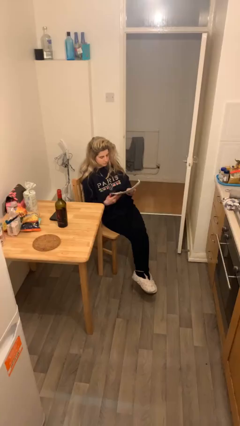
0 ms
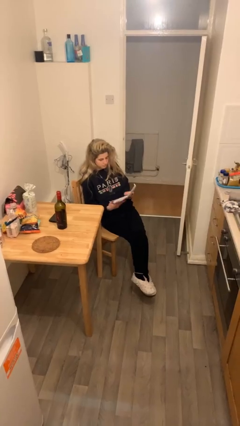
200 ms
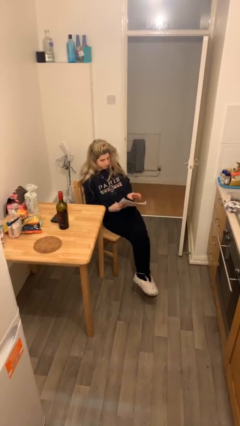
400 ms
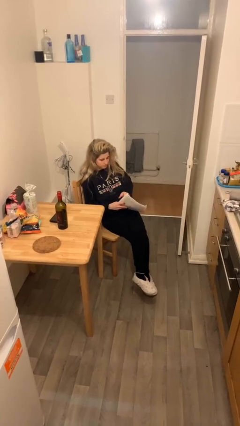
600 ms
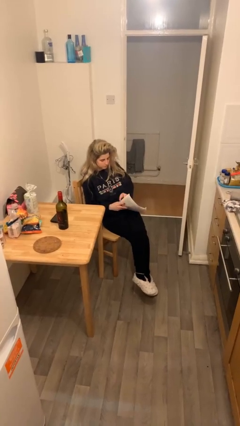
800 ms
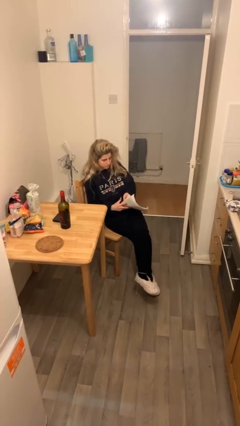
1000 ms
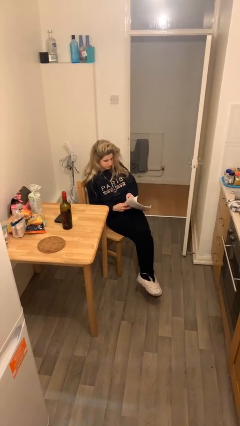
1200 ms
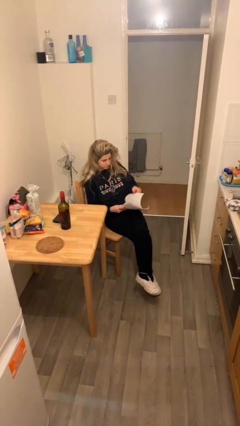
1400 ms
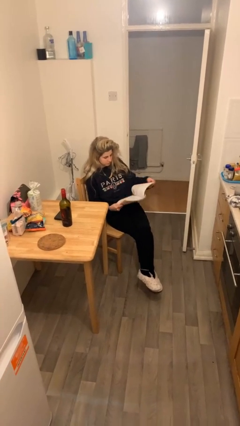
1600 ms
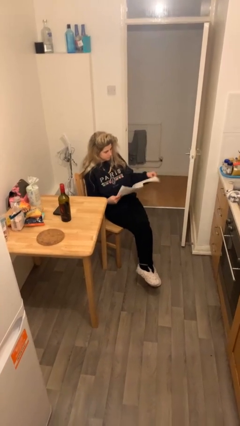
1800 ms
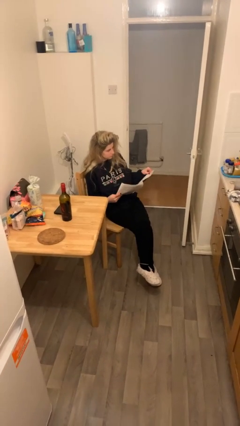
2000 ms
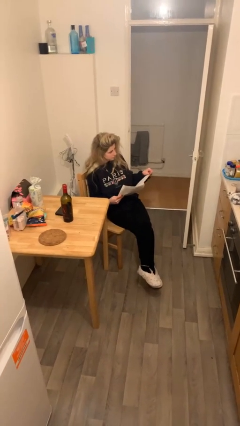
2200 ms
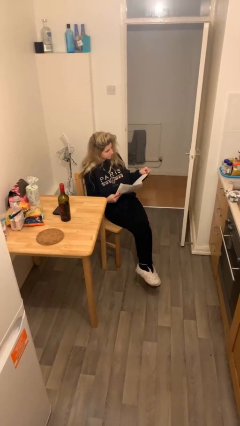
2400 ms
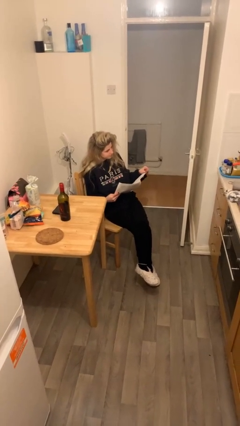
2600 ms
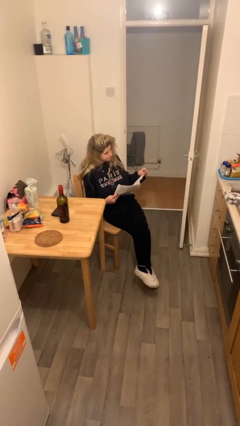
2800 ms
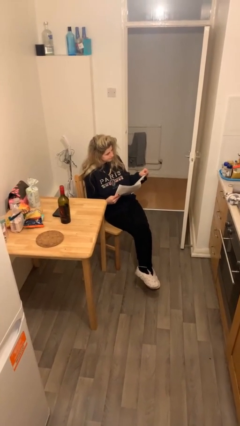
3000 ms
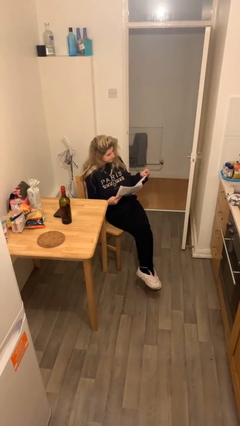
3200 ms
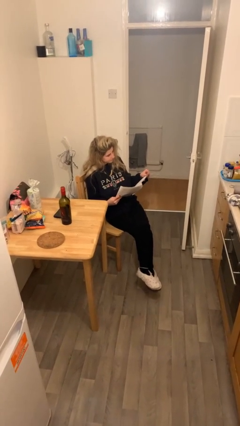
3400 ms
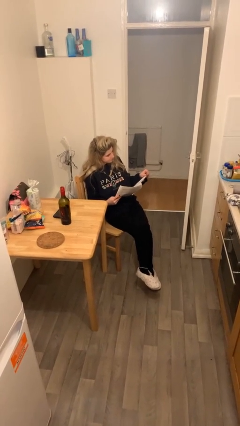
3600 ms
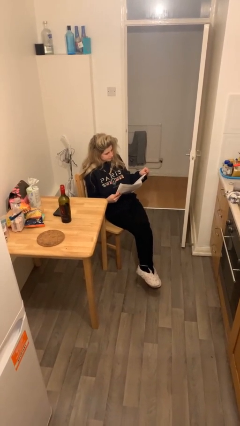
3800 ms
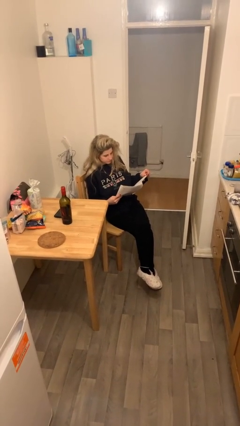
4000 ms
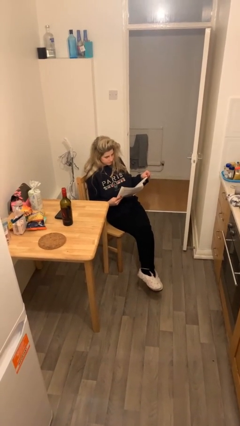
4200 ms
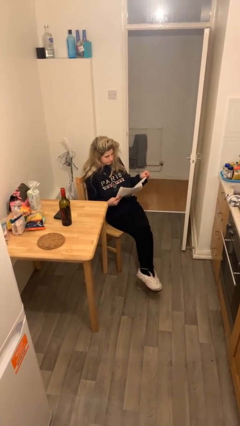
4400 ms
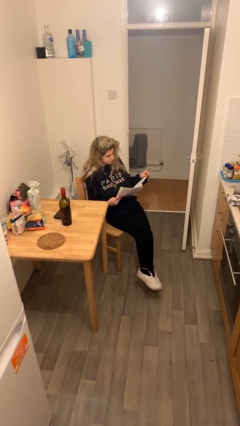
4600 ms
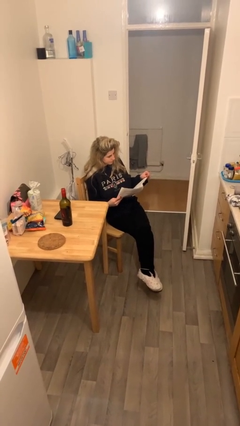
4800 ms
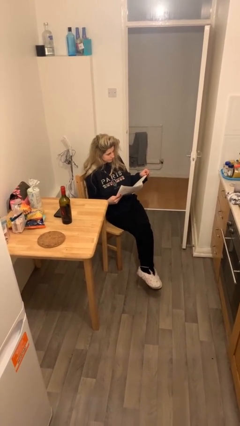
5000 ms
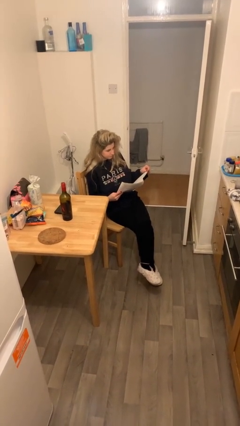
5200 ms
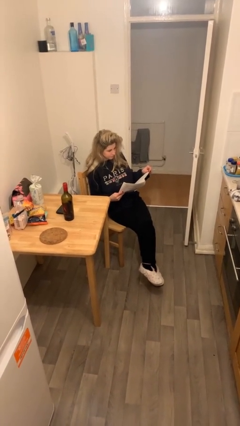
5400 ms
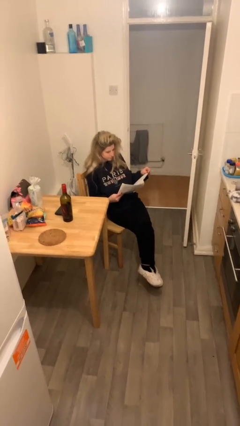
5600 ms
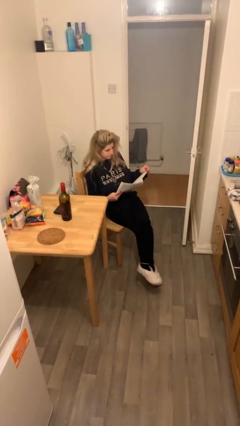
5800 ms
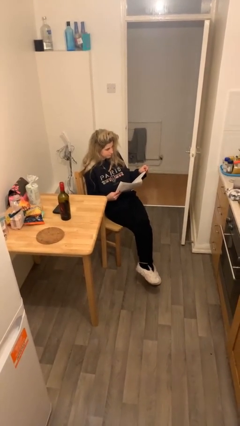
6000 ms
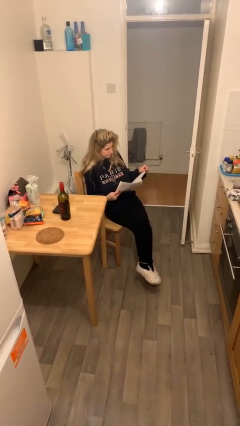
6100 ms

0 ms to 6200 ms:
person reads document

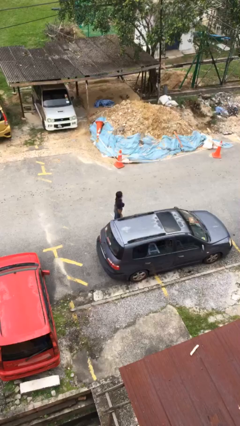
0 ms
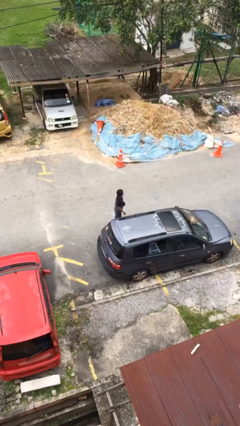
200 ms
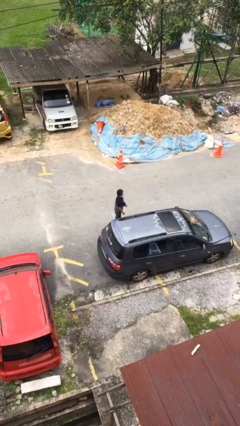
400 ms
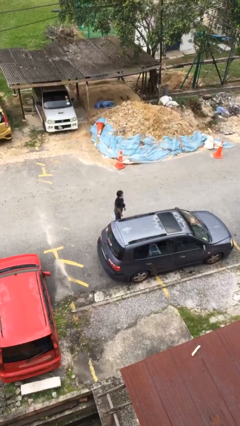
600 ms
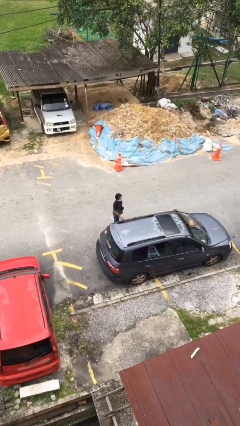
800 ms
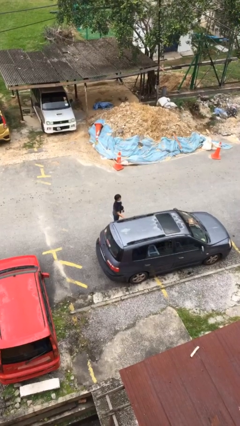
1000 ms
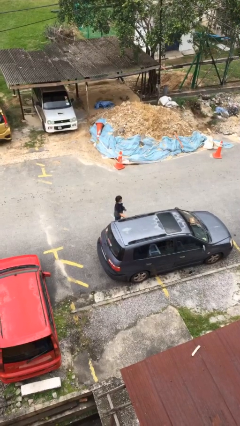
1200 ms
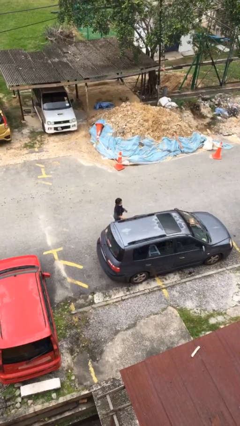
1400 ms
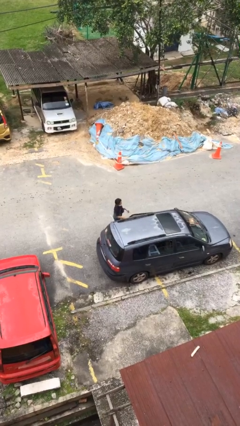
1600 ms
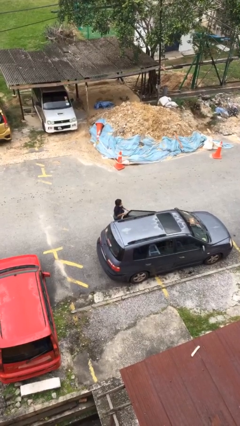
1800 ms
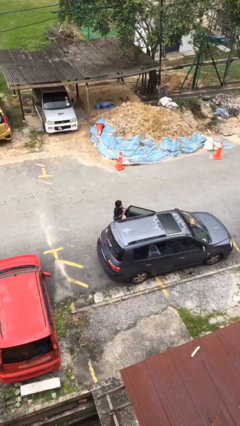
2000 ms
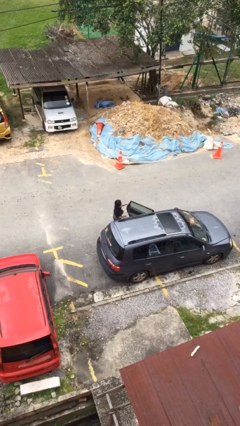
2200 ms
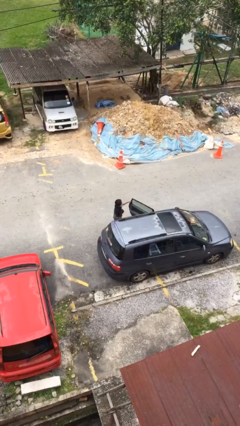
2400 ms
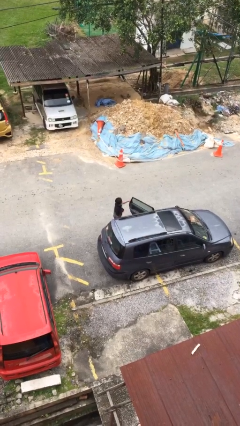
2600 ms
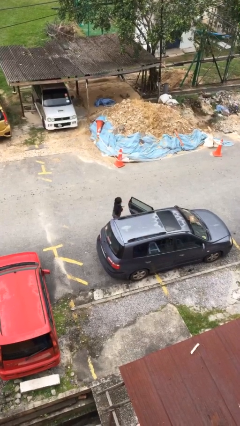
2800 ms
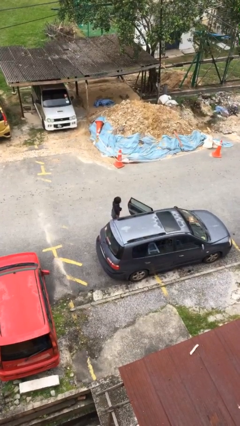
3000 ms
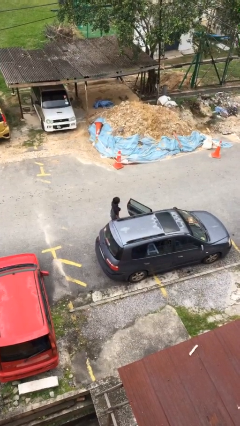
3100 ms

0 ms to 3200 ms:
person opens car door

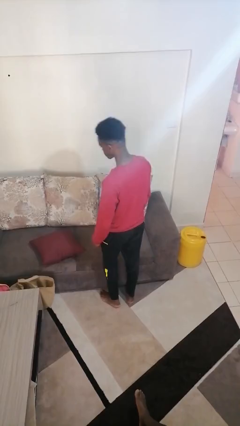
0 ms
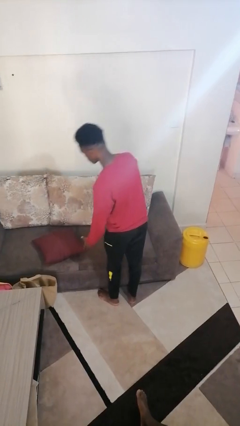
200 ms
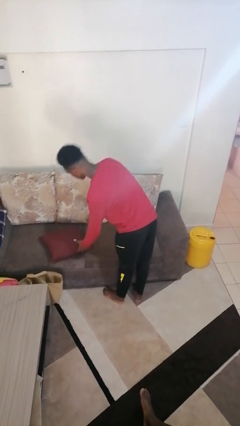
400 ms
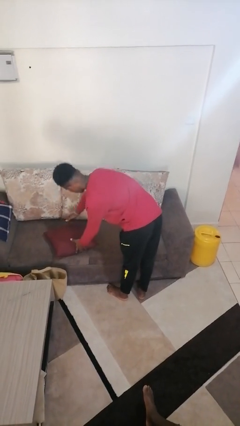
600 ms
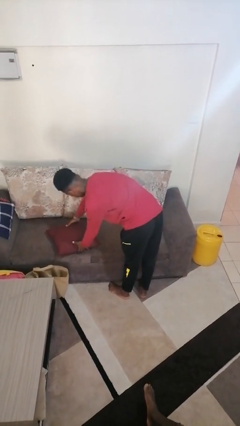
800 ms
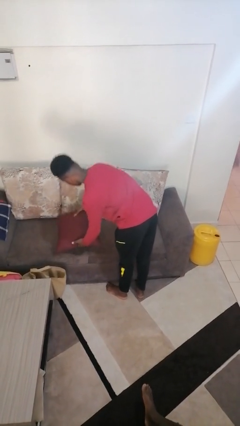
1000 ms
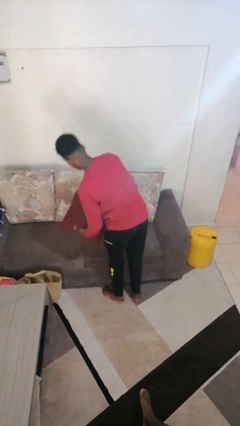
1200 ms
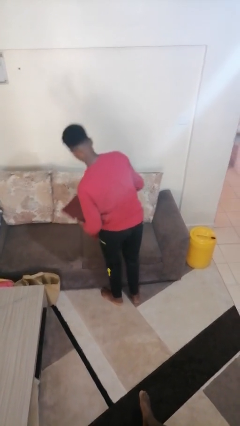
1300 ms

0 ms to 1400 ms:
person picks up object from couch

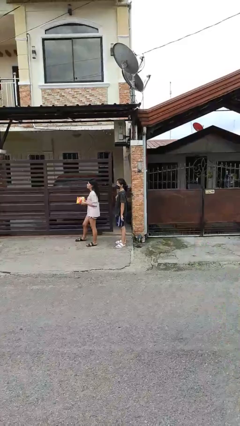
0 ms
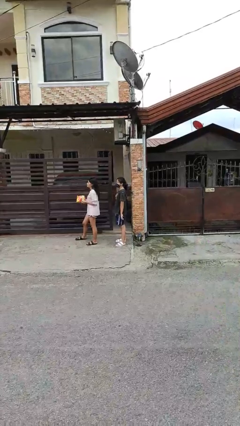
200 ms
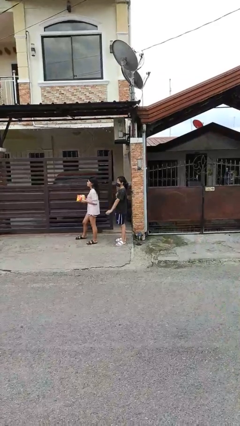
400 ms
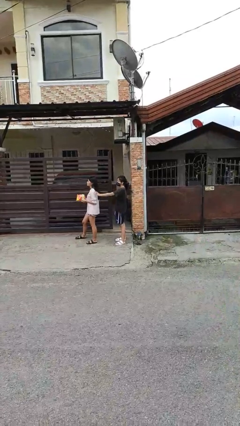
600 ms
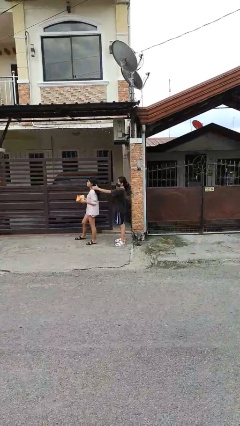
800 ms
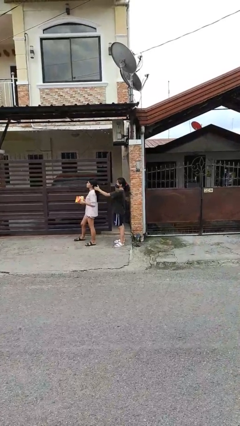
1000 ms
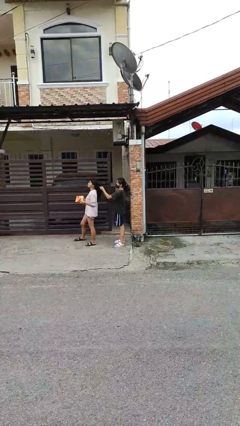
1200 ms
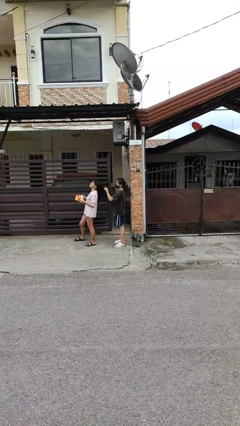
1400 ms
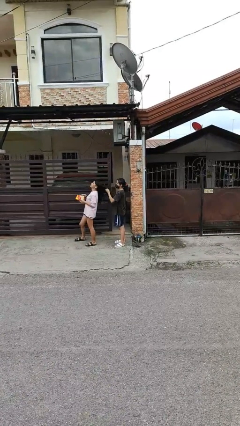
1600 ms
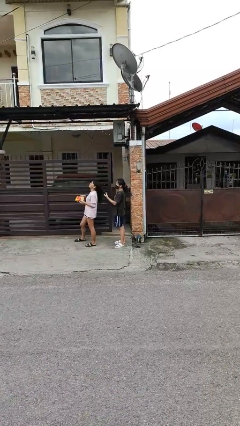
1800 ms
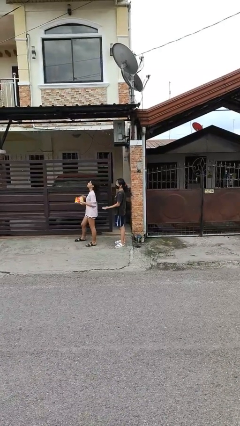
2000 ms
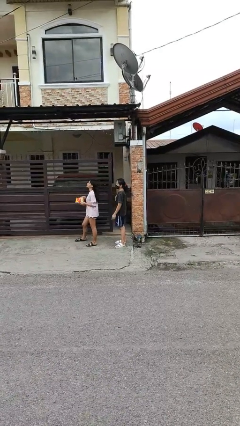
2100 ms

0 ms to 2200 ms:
person grabs person by hair

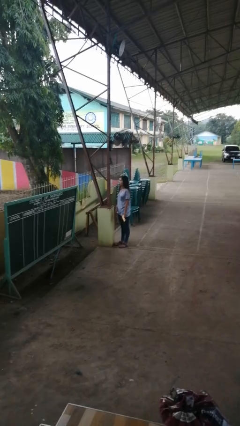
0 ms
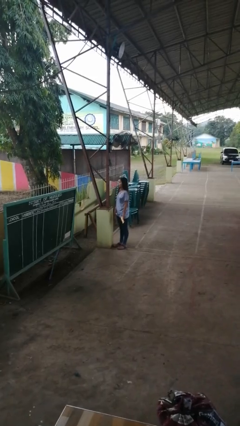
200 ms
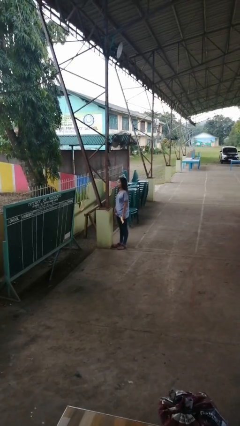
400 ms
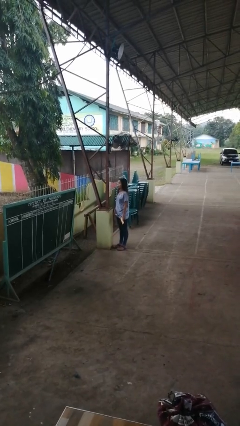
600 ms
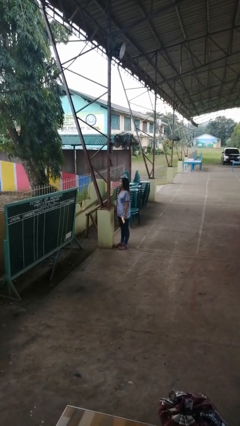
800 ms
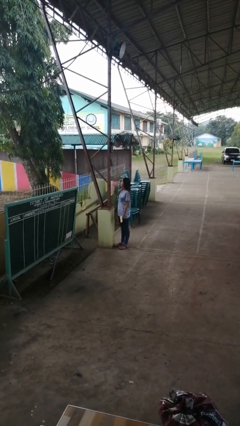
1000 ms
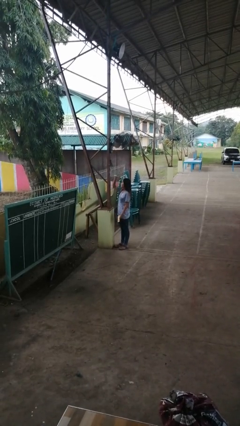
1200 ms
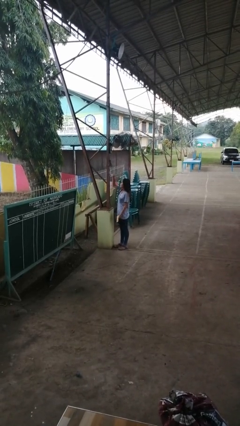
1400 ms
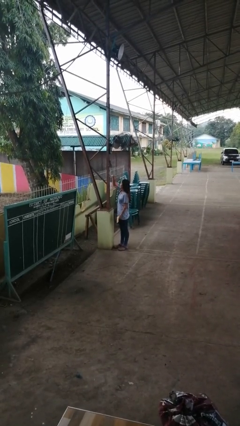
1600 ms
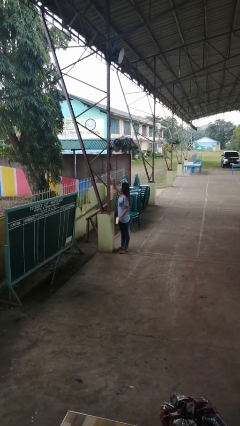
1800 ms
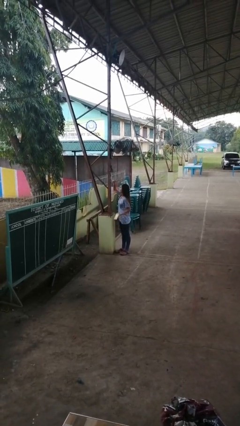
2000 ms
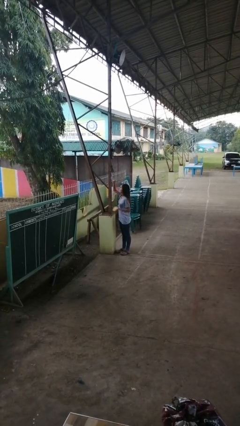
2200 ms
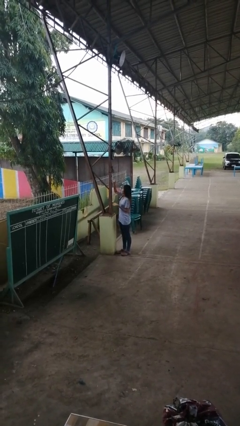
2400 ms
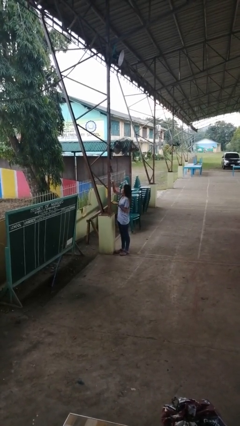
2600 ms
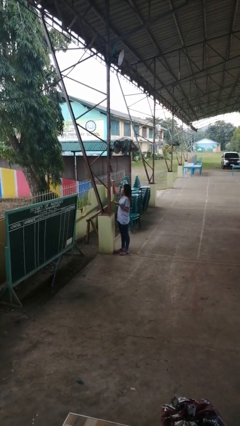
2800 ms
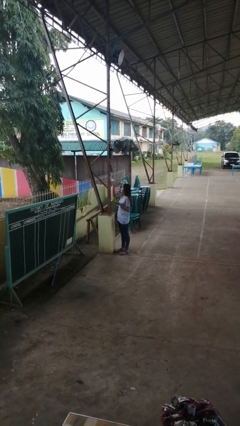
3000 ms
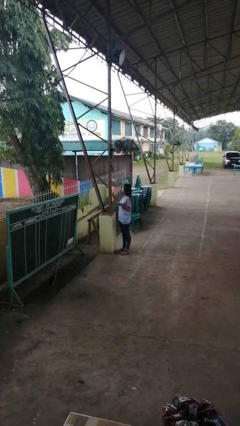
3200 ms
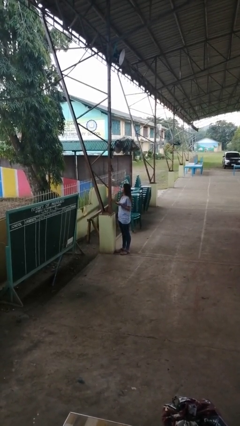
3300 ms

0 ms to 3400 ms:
person plugs into electrical socket

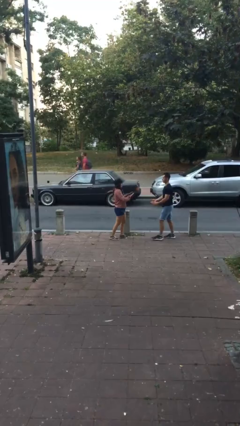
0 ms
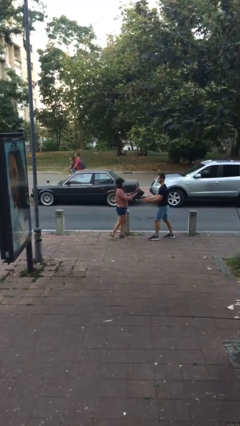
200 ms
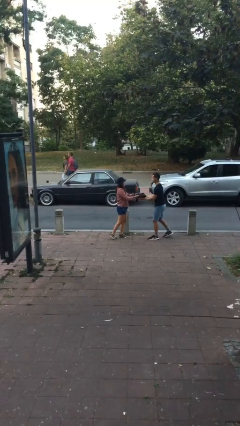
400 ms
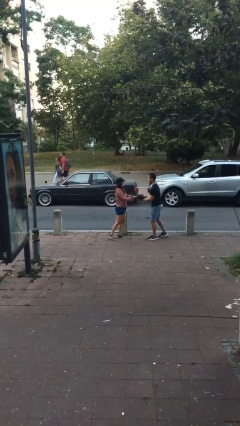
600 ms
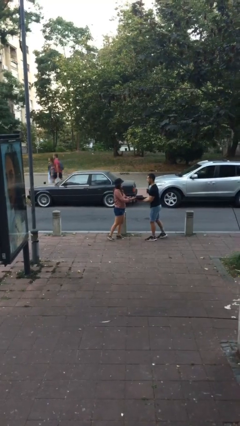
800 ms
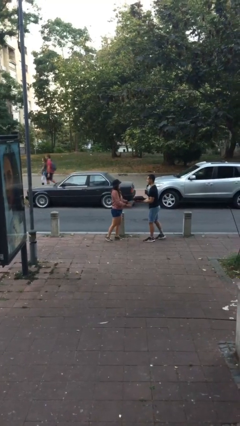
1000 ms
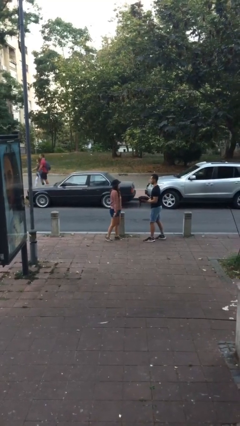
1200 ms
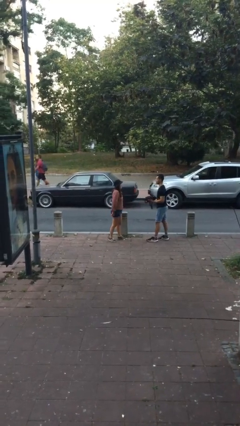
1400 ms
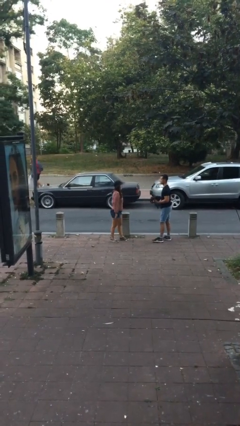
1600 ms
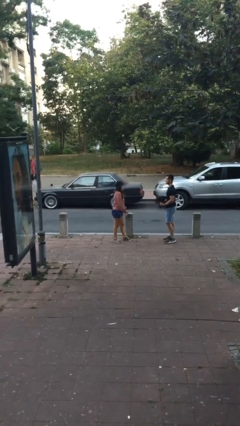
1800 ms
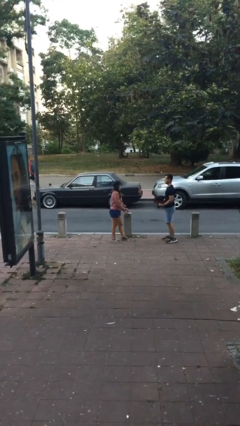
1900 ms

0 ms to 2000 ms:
person transfers object to person
